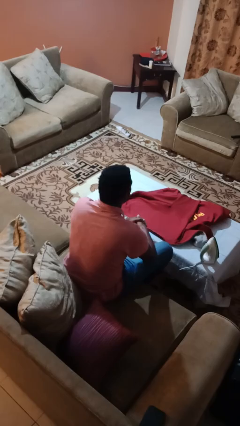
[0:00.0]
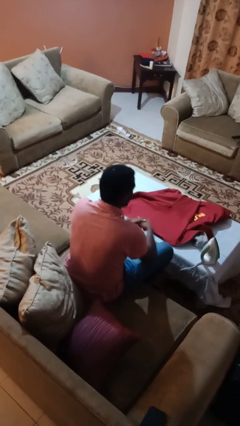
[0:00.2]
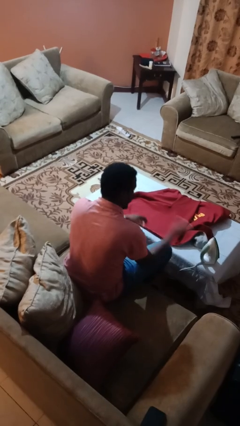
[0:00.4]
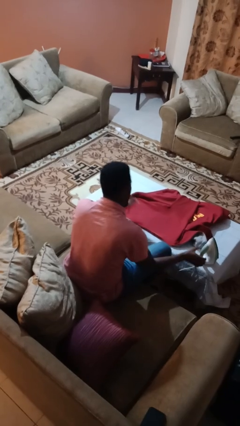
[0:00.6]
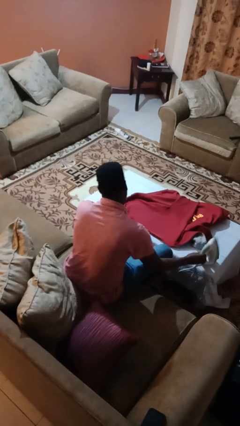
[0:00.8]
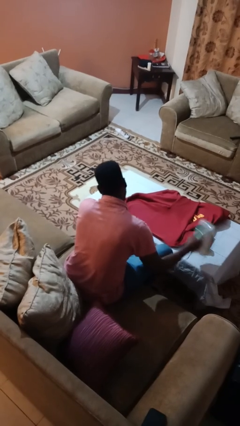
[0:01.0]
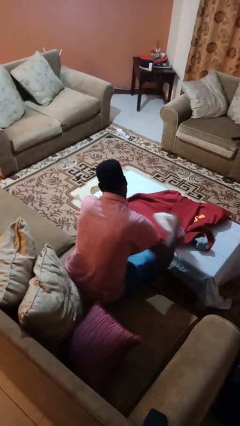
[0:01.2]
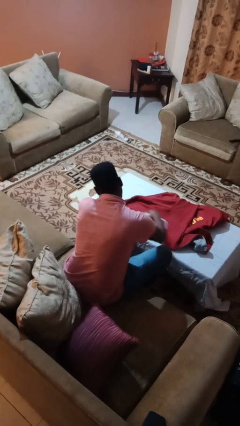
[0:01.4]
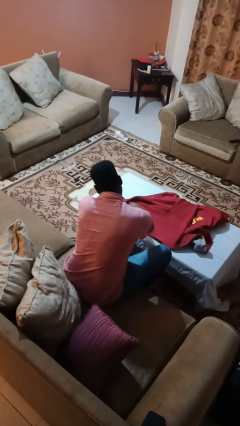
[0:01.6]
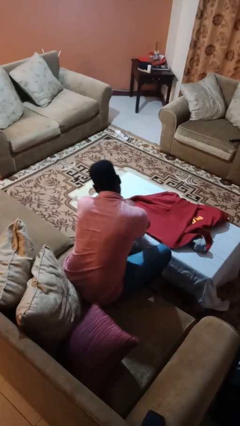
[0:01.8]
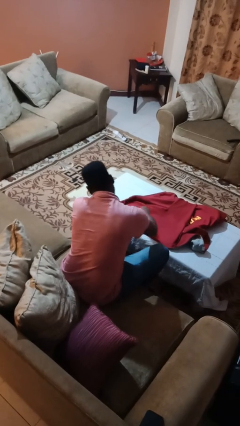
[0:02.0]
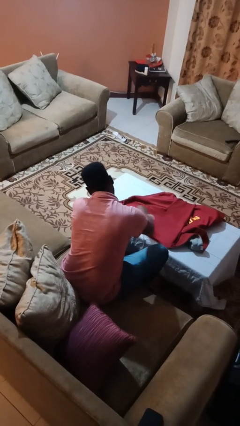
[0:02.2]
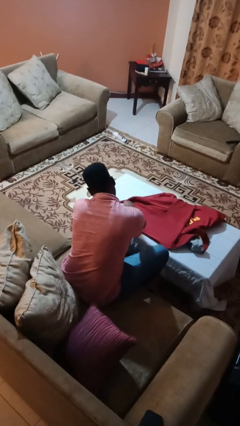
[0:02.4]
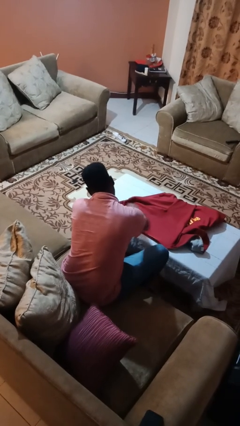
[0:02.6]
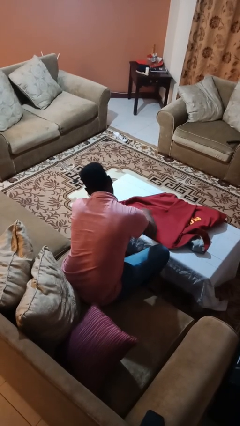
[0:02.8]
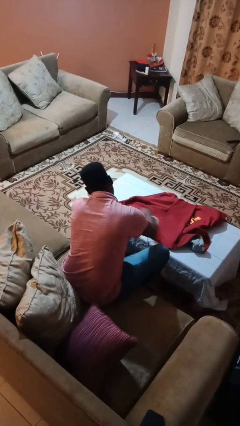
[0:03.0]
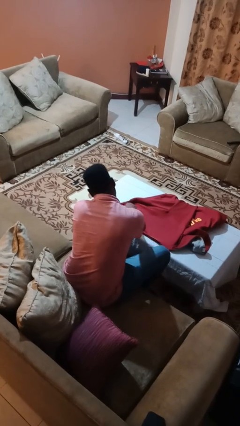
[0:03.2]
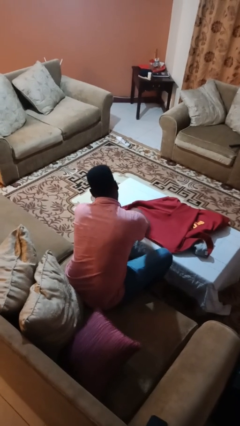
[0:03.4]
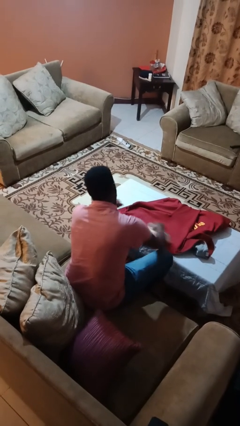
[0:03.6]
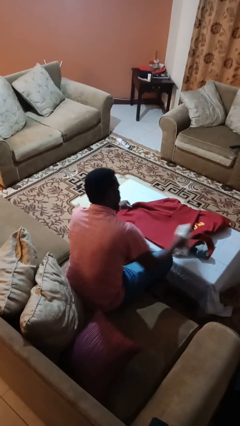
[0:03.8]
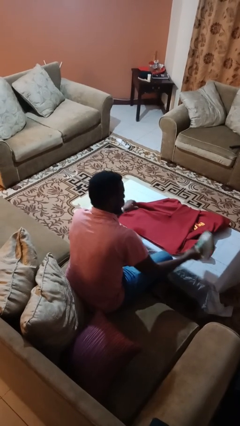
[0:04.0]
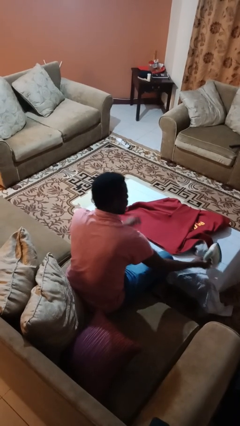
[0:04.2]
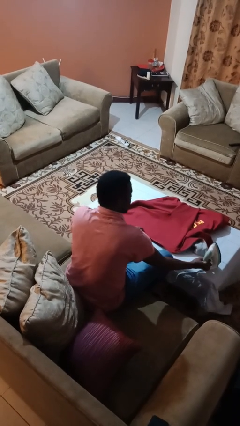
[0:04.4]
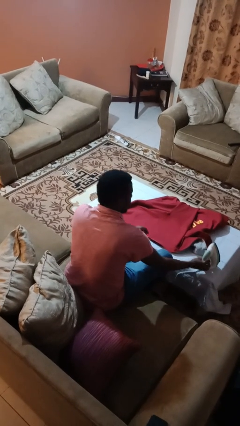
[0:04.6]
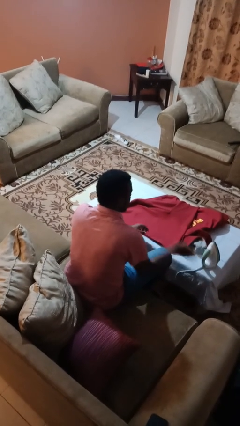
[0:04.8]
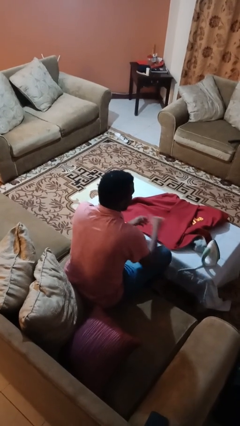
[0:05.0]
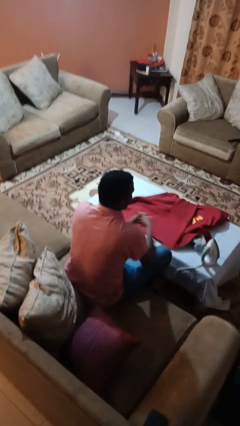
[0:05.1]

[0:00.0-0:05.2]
person irons clothes

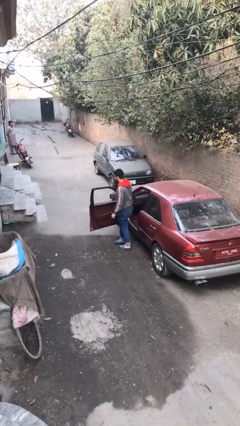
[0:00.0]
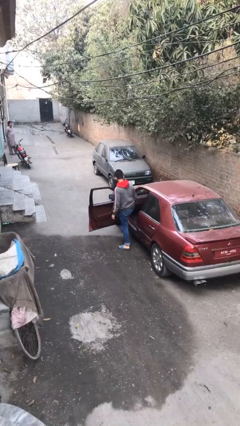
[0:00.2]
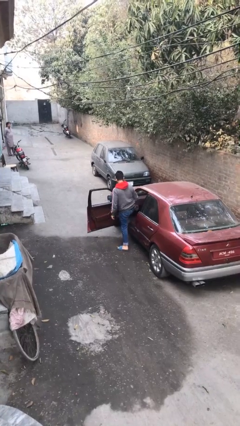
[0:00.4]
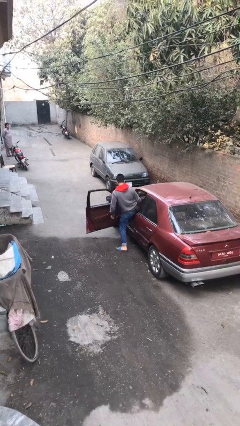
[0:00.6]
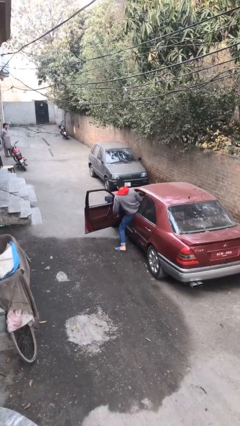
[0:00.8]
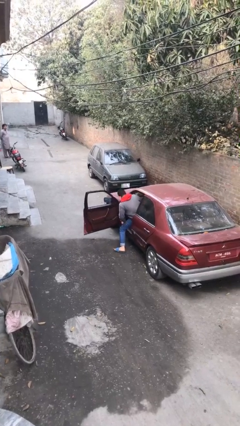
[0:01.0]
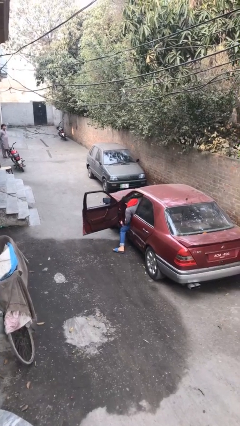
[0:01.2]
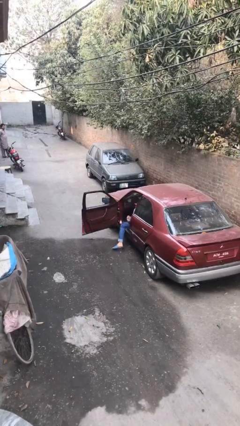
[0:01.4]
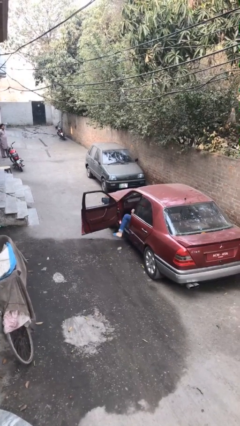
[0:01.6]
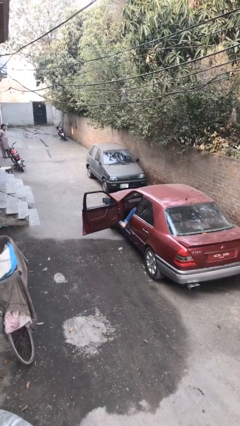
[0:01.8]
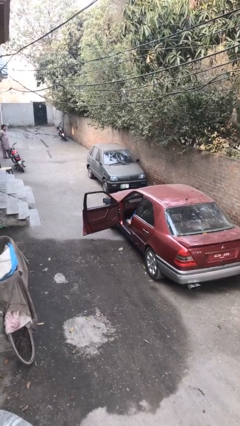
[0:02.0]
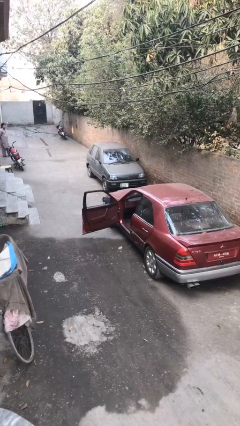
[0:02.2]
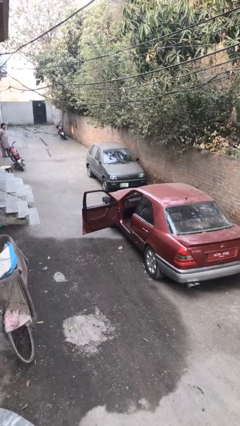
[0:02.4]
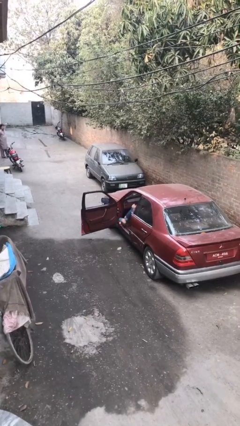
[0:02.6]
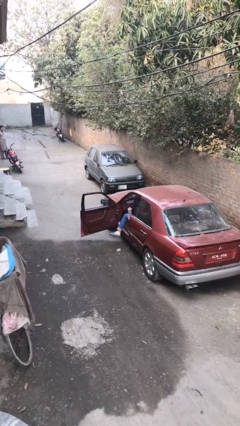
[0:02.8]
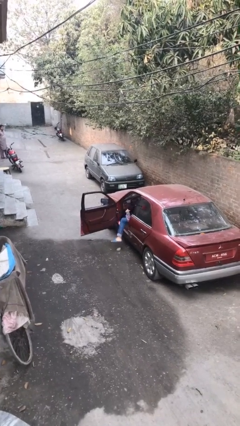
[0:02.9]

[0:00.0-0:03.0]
person enters car

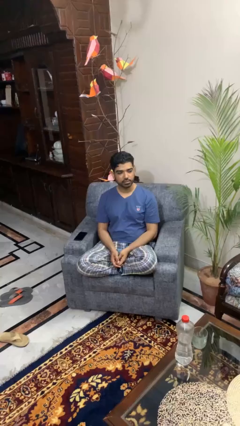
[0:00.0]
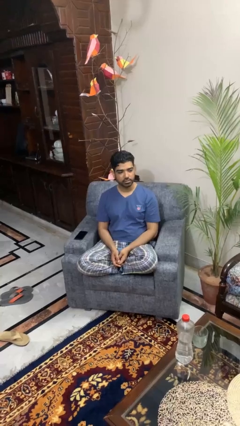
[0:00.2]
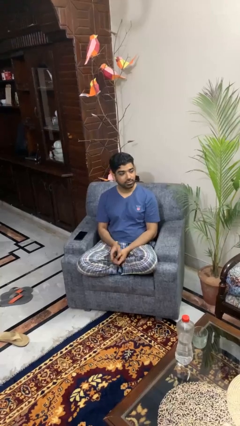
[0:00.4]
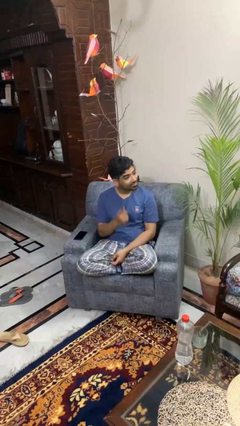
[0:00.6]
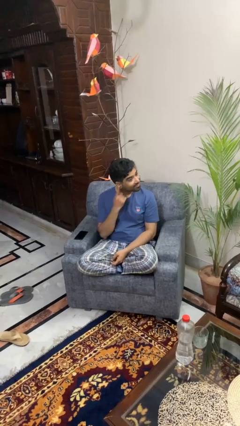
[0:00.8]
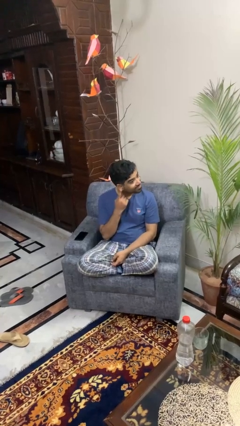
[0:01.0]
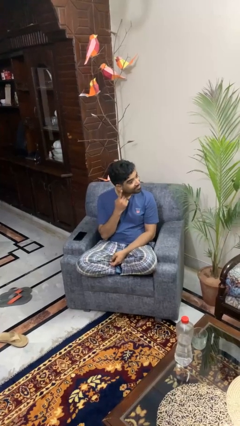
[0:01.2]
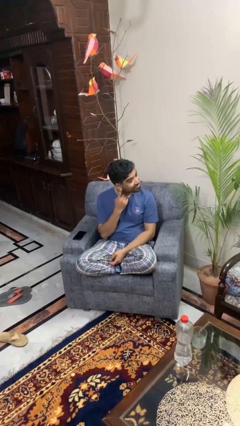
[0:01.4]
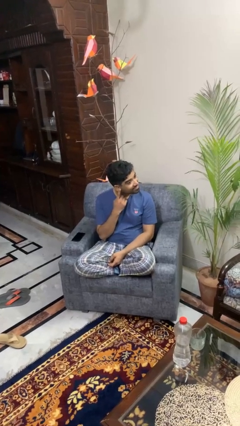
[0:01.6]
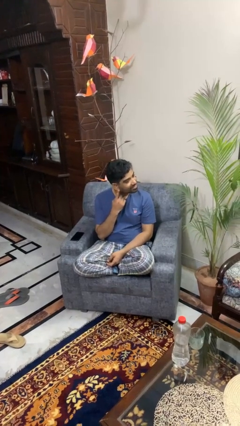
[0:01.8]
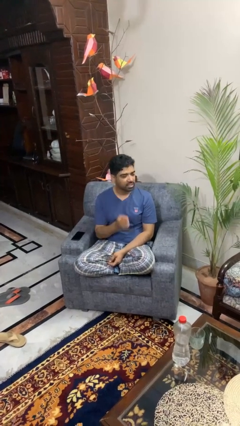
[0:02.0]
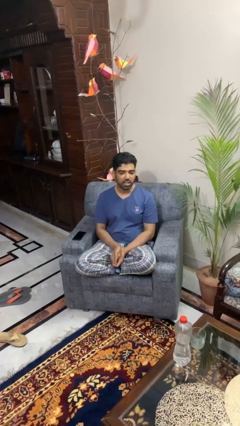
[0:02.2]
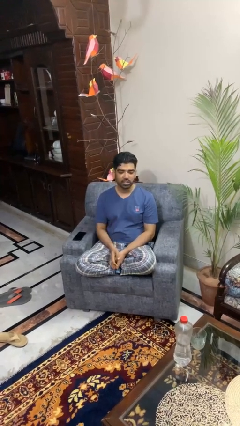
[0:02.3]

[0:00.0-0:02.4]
person gestures listen closely

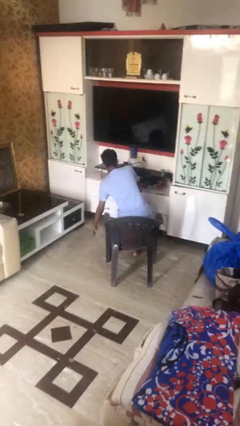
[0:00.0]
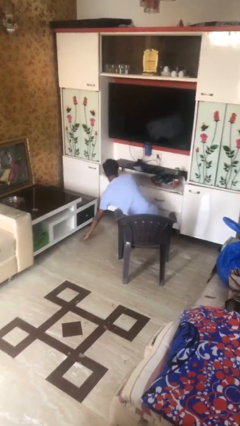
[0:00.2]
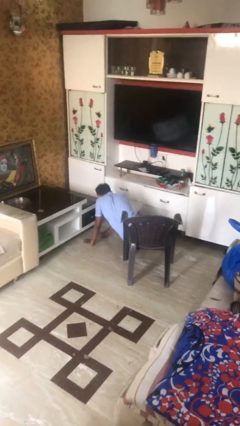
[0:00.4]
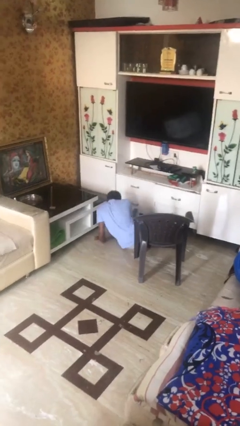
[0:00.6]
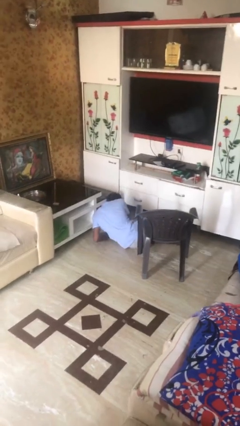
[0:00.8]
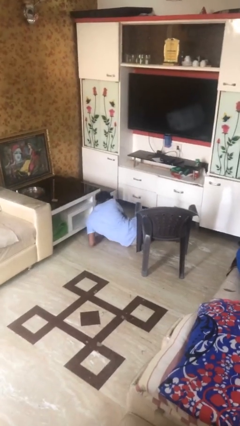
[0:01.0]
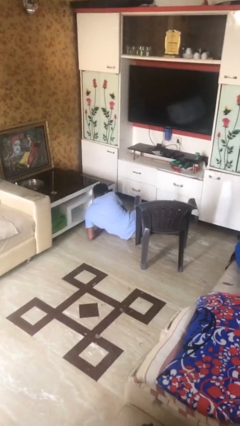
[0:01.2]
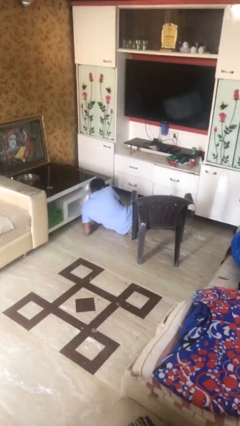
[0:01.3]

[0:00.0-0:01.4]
person falls from chair

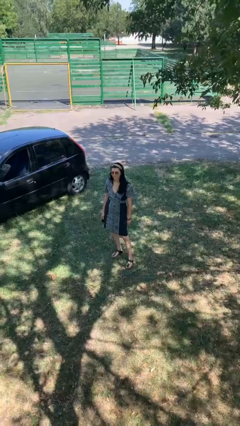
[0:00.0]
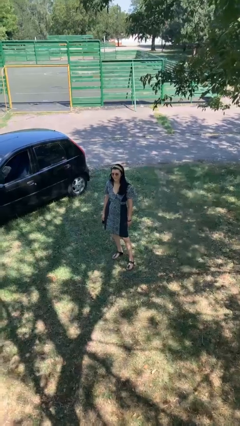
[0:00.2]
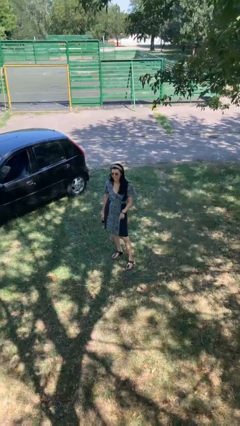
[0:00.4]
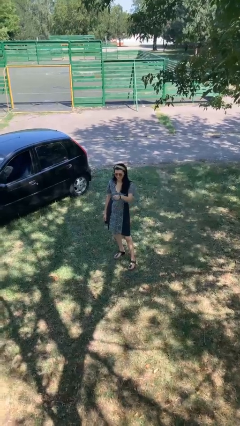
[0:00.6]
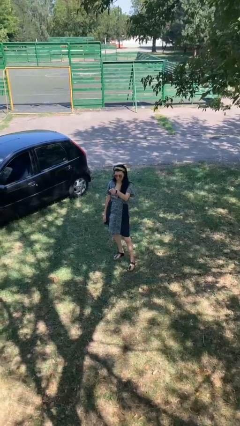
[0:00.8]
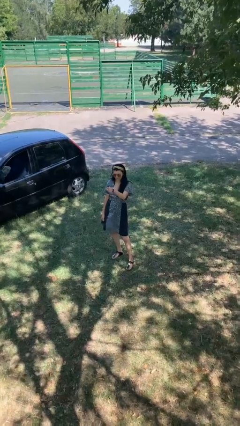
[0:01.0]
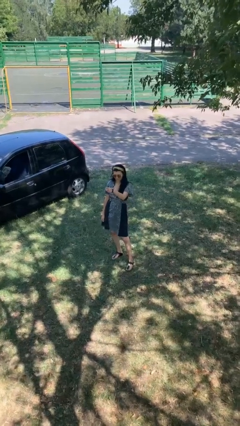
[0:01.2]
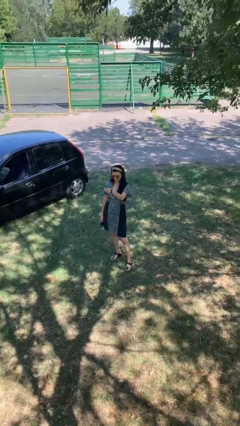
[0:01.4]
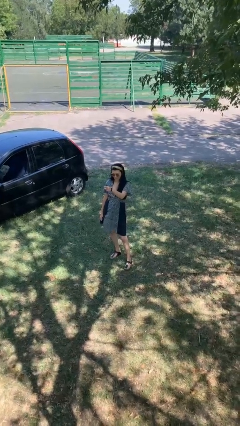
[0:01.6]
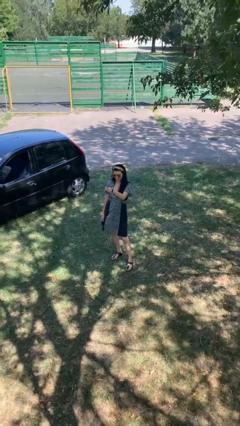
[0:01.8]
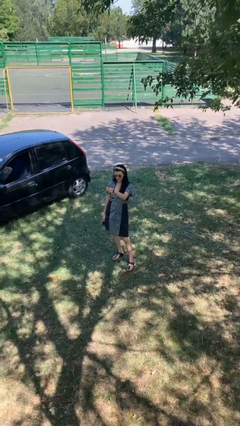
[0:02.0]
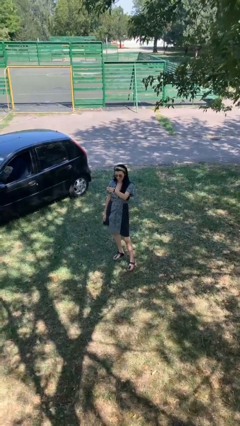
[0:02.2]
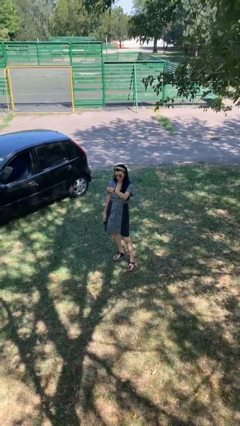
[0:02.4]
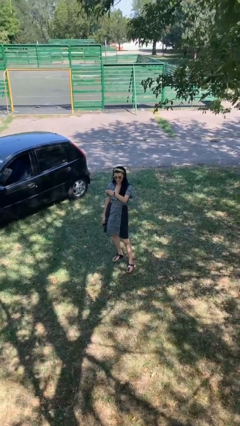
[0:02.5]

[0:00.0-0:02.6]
person points at person

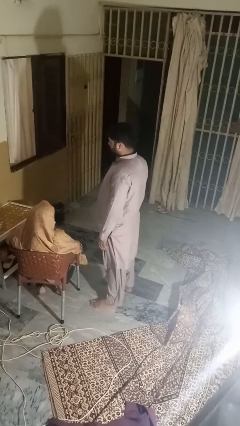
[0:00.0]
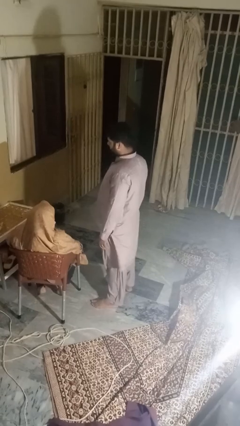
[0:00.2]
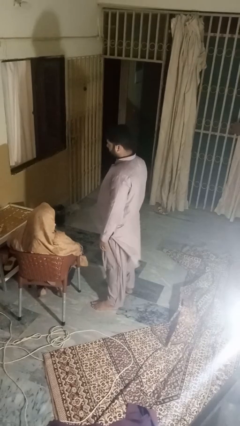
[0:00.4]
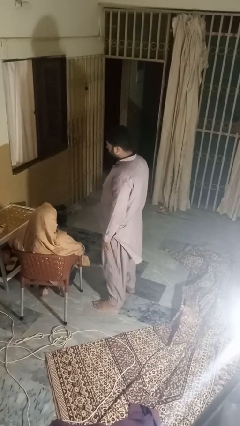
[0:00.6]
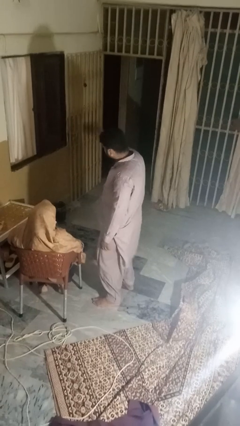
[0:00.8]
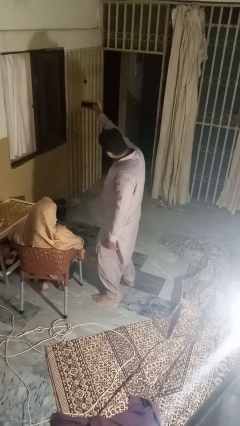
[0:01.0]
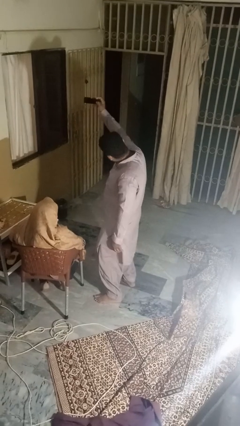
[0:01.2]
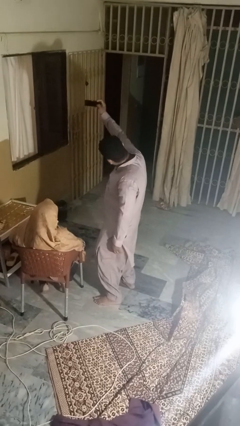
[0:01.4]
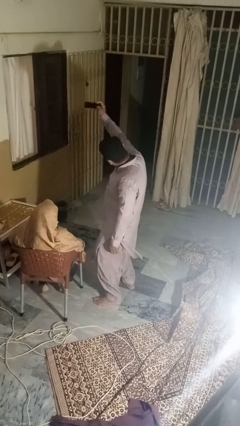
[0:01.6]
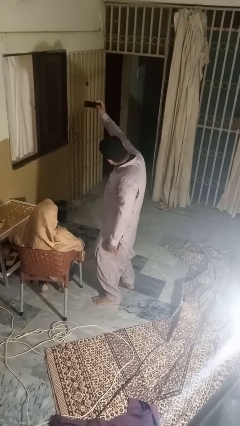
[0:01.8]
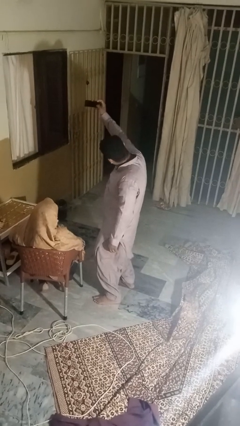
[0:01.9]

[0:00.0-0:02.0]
person takes selfie with person

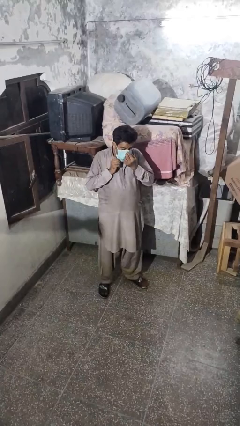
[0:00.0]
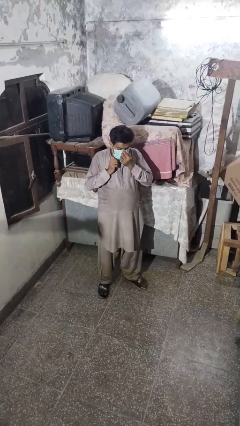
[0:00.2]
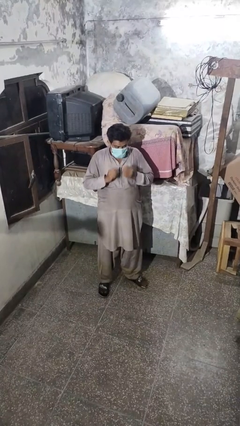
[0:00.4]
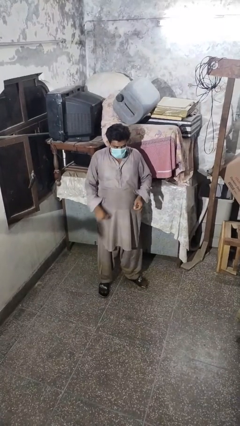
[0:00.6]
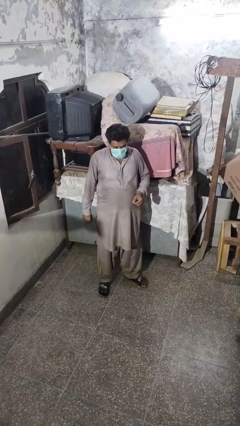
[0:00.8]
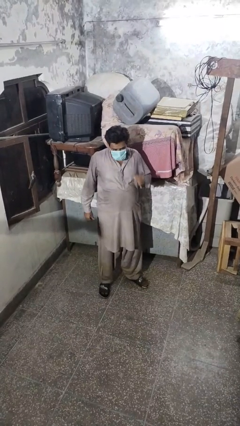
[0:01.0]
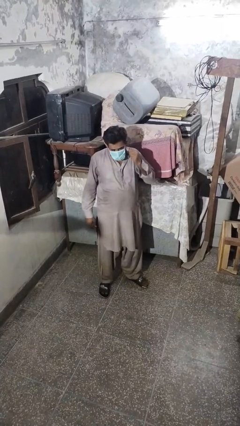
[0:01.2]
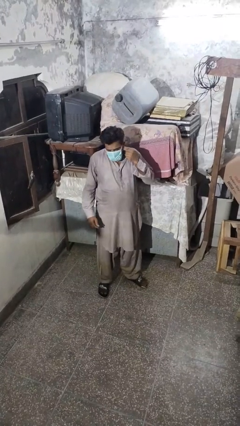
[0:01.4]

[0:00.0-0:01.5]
person takes off facemask
